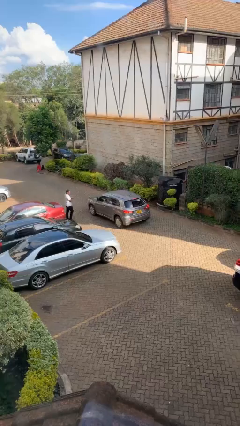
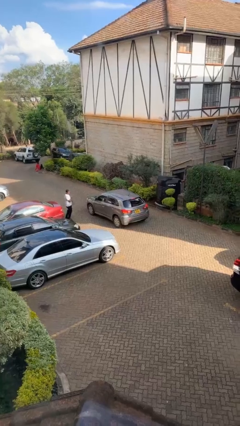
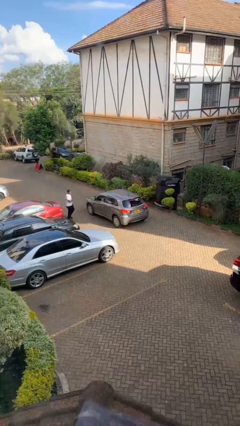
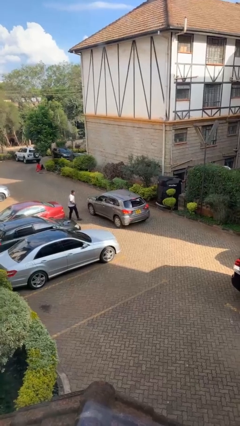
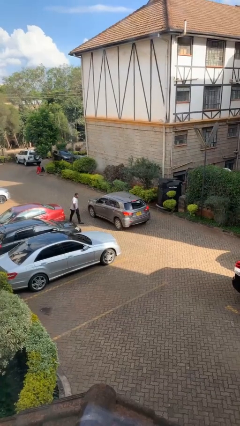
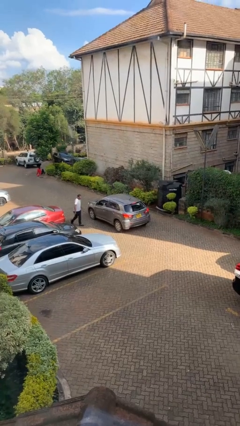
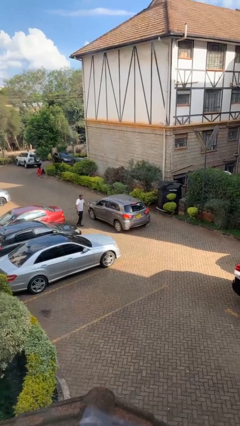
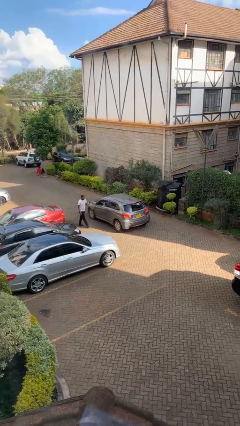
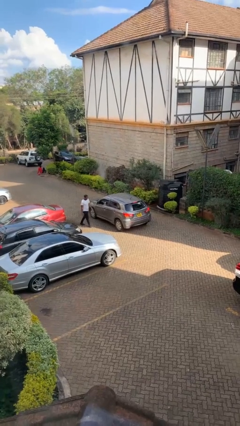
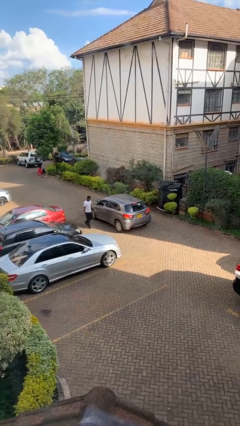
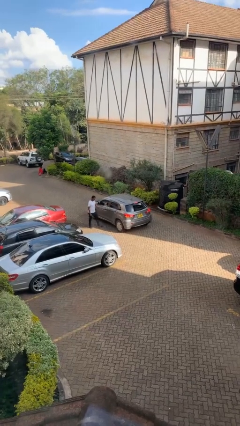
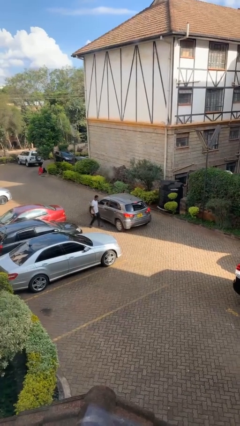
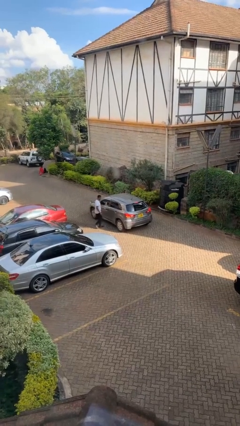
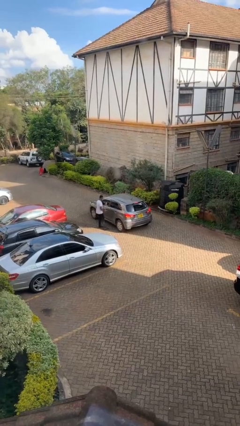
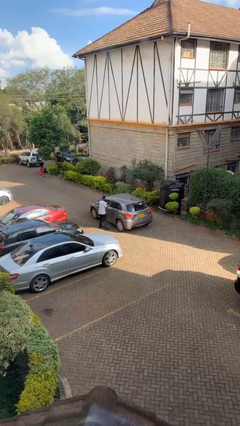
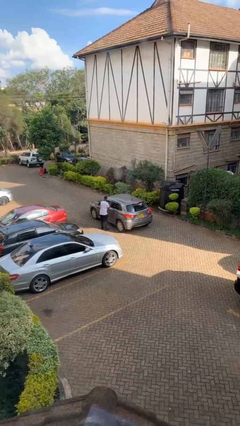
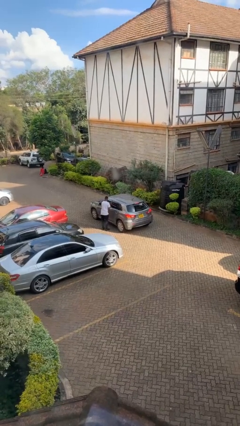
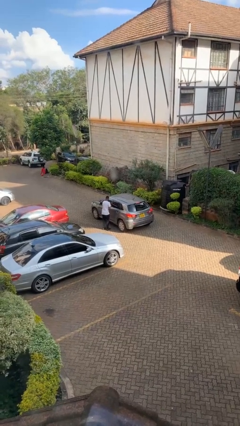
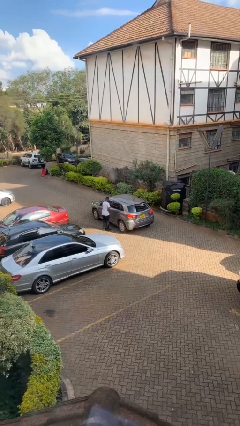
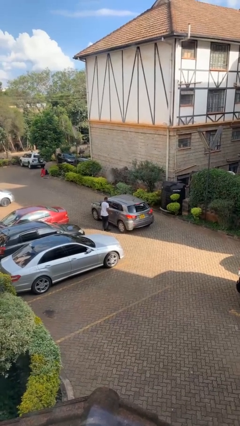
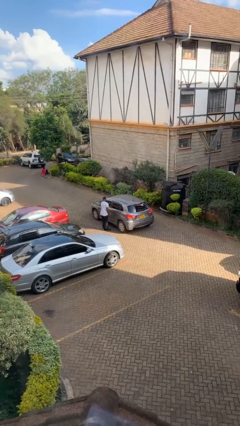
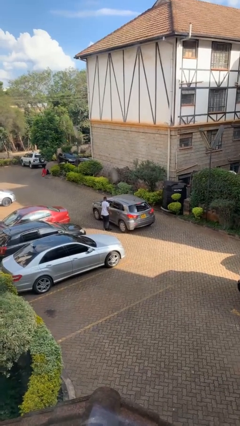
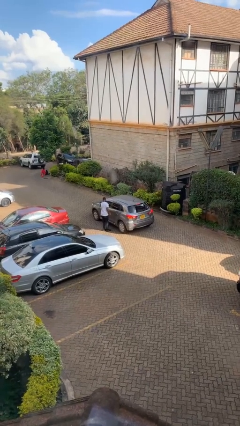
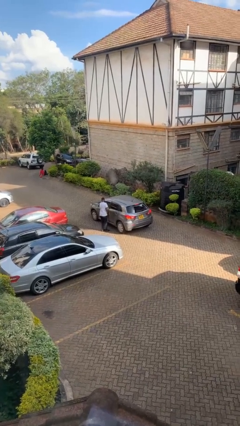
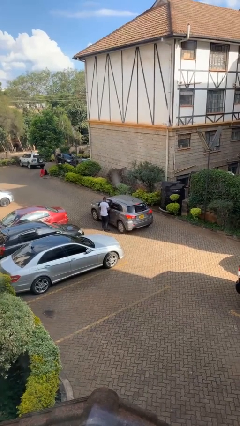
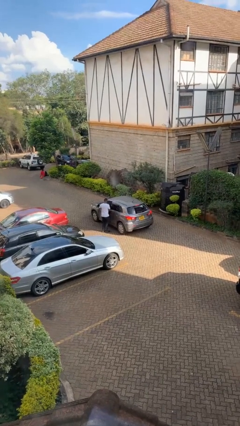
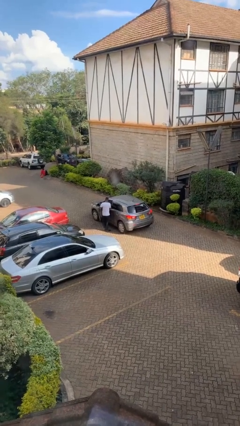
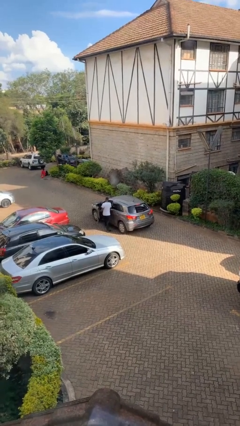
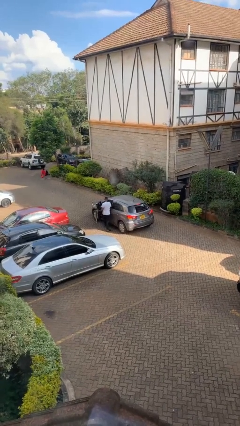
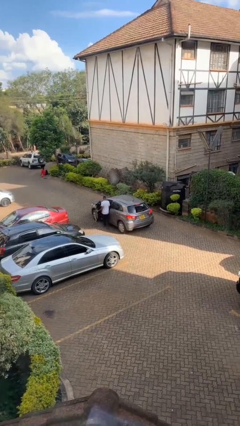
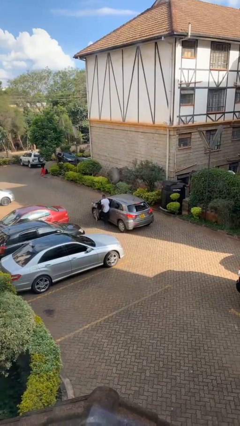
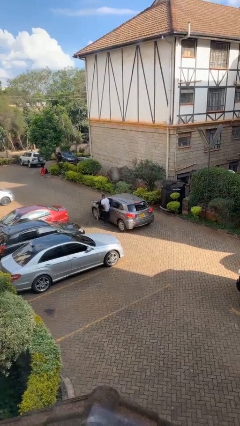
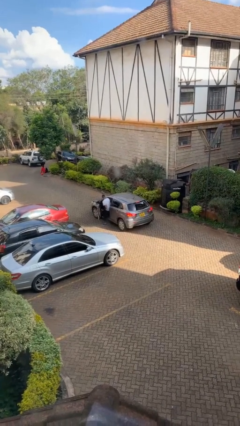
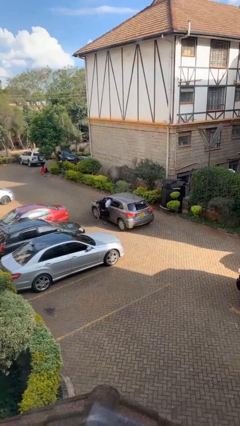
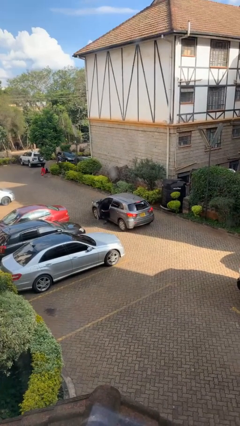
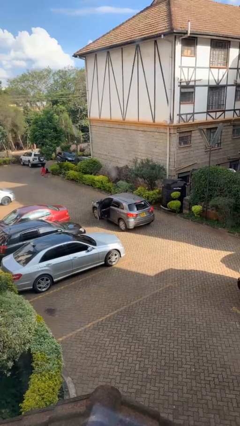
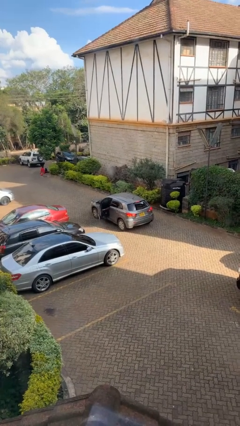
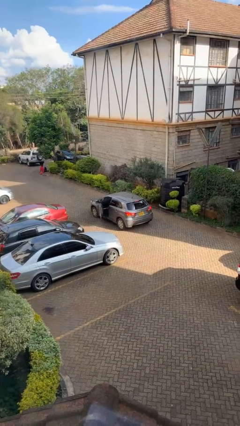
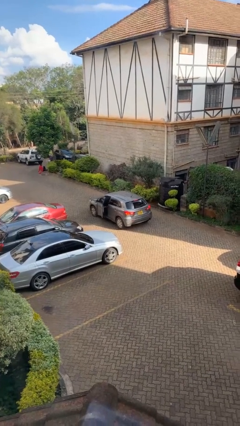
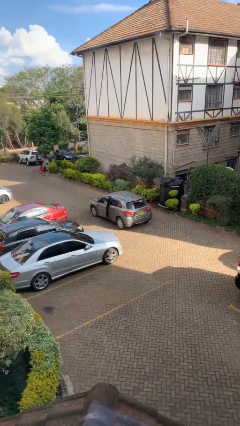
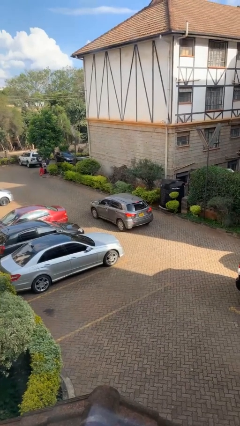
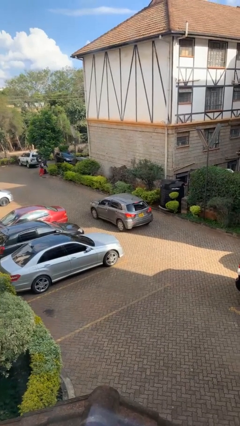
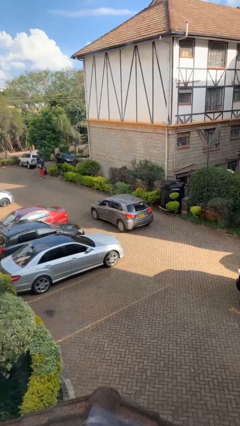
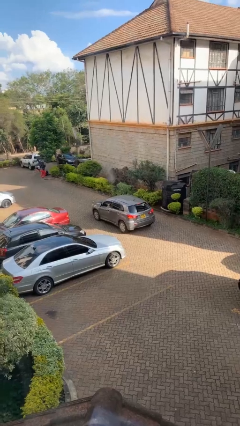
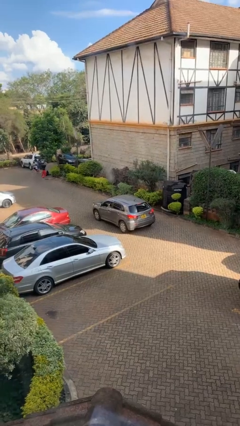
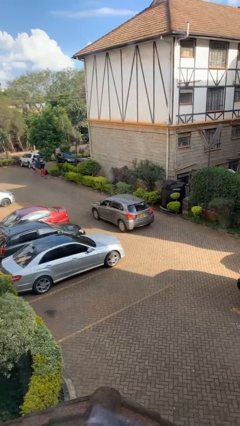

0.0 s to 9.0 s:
car picks up person

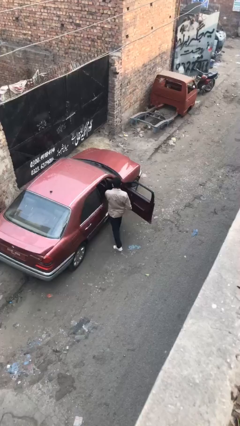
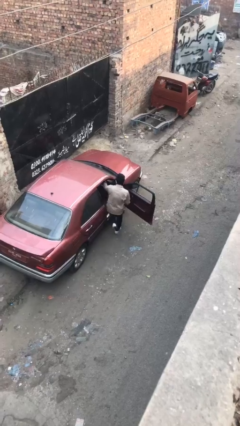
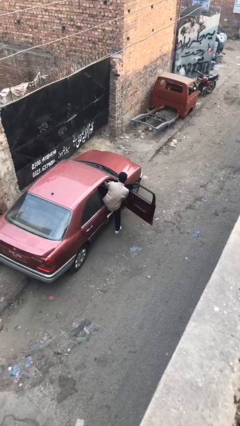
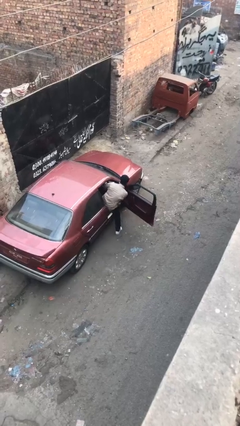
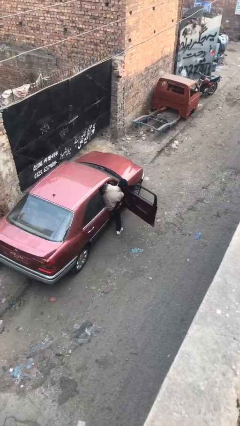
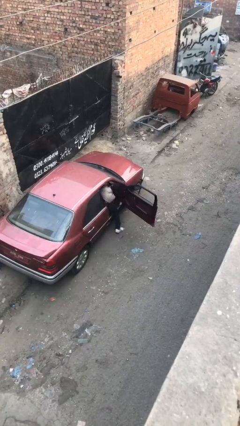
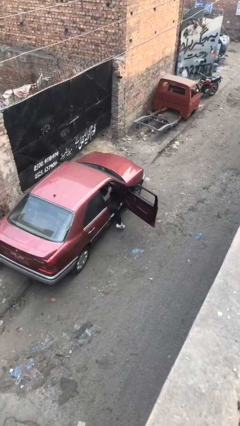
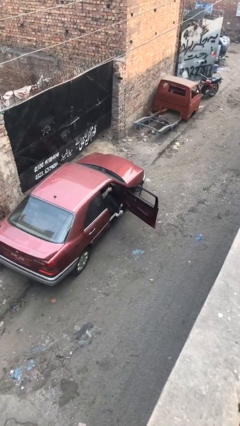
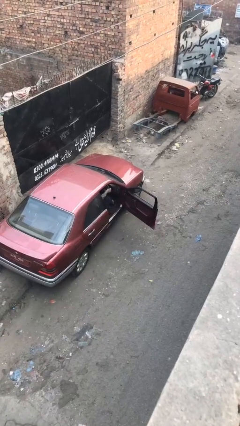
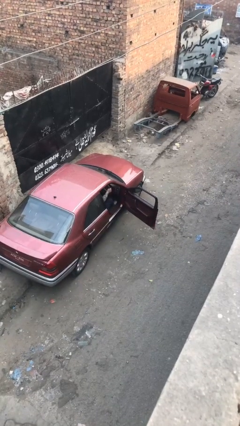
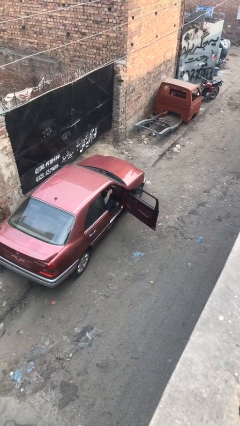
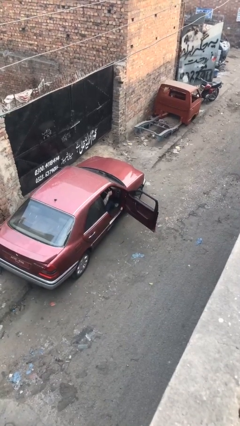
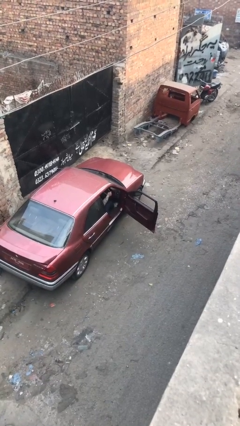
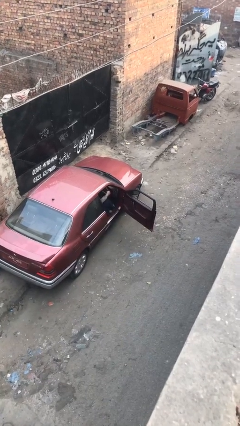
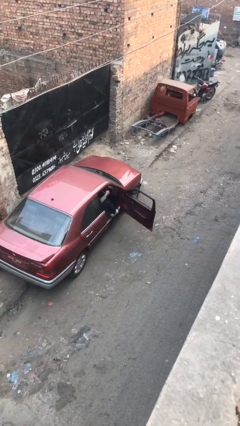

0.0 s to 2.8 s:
person enters car

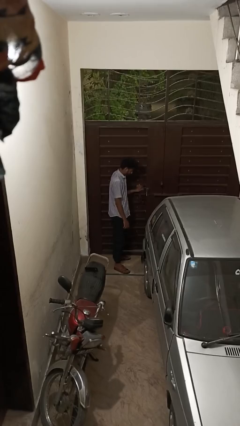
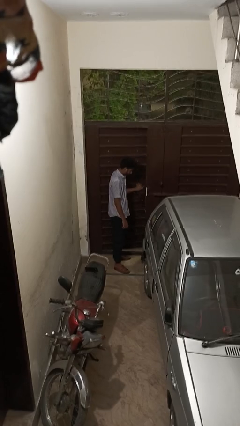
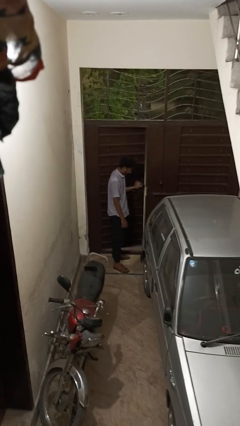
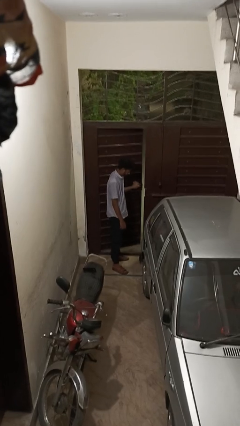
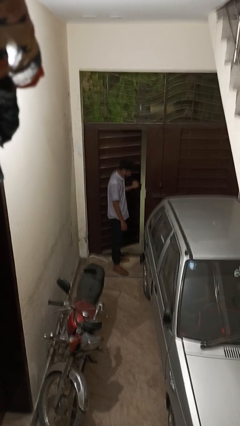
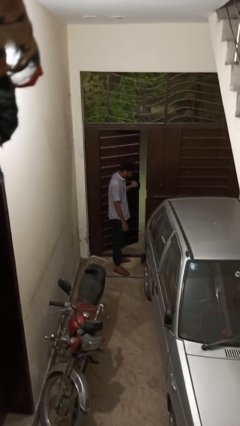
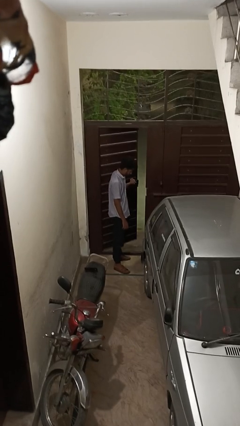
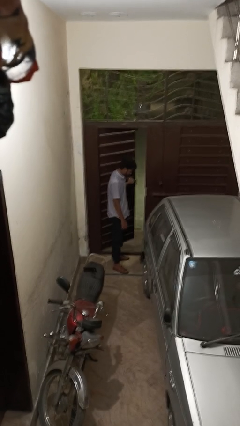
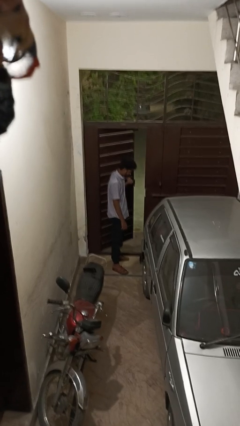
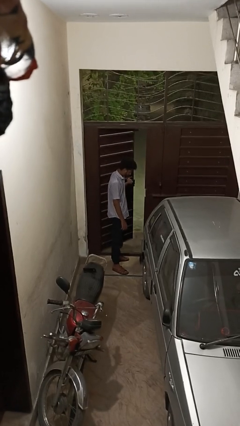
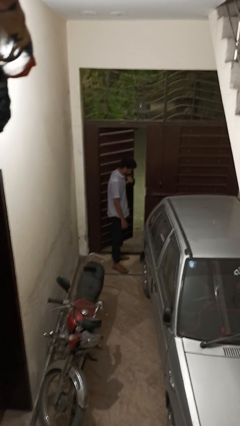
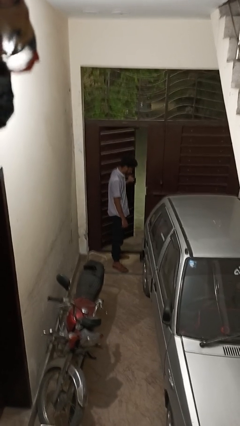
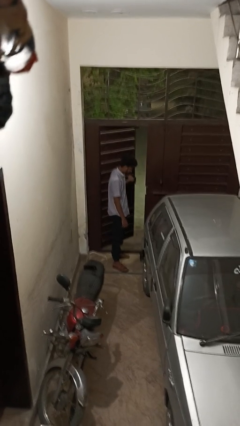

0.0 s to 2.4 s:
person opens gate

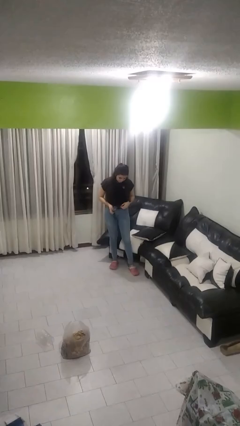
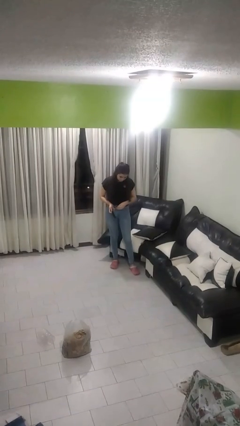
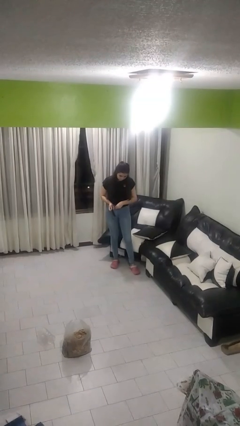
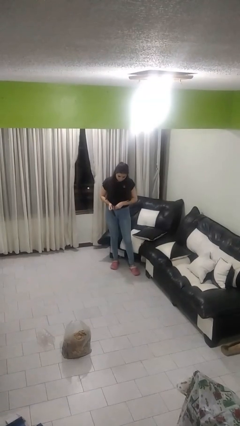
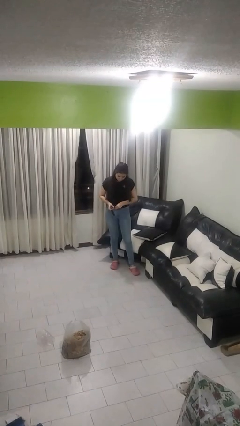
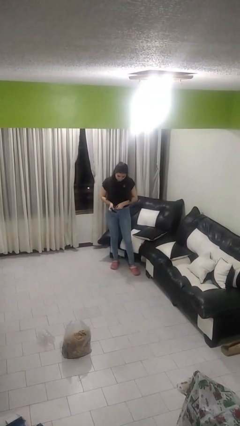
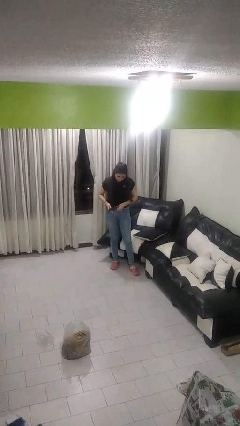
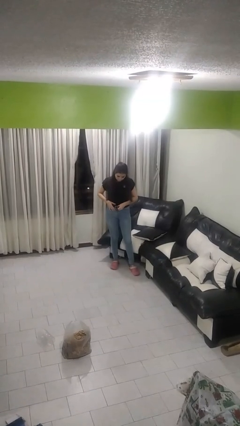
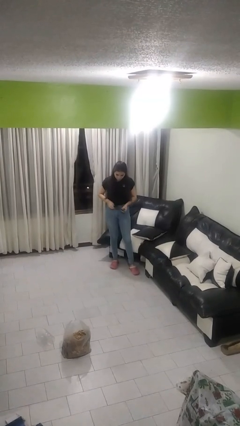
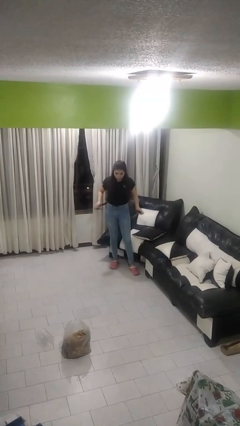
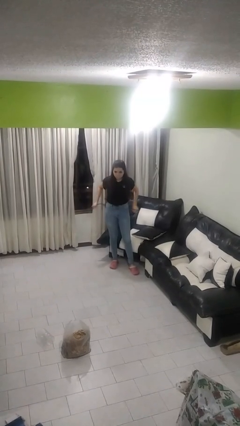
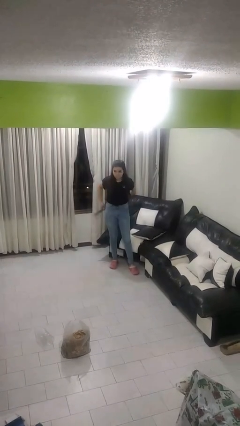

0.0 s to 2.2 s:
person takes off belt

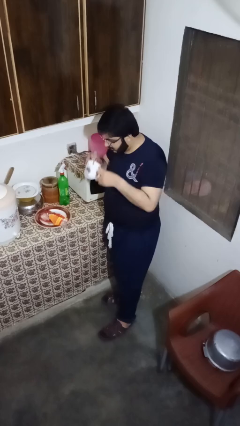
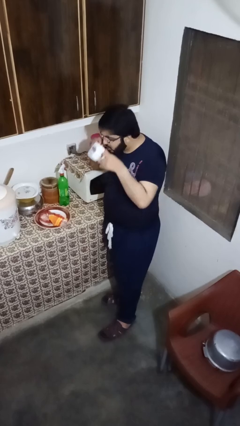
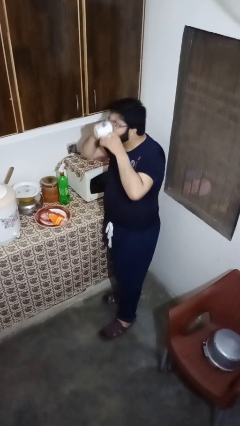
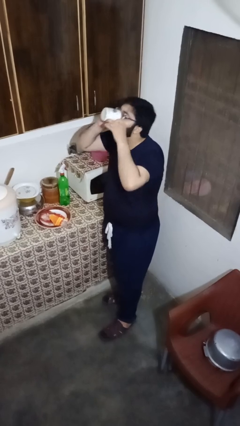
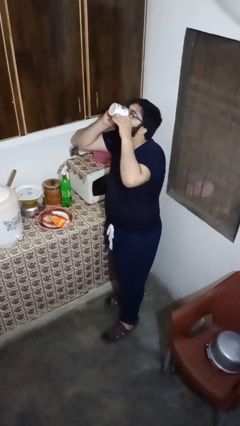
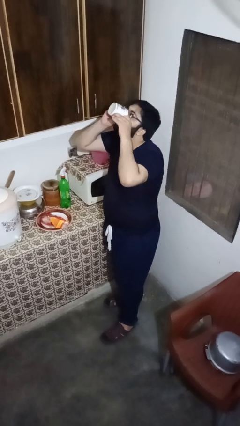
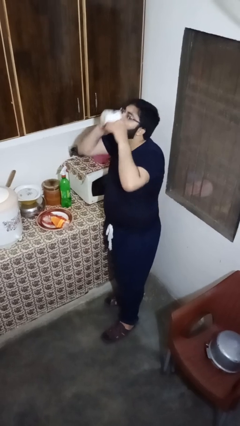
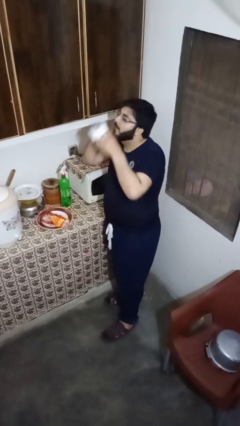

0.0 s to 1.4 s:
person drinks from mug
